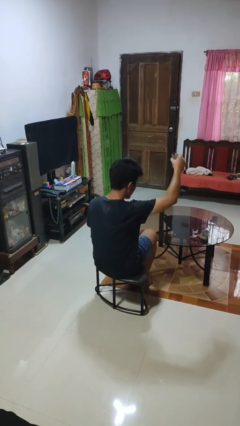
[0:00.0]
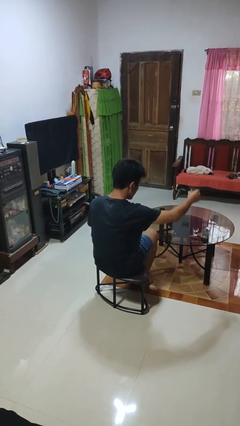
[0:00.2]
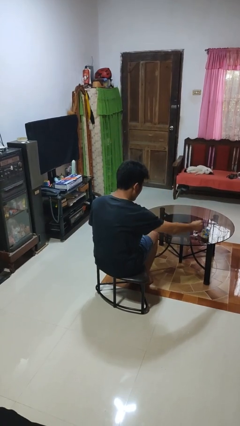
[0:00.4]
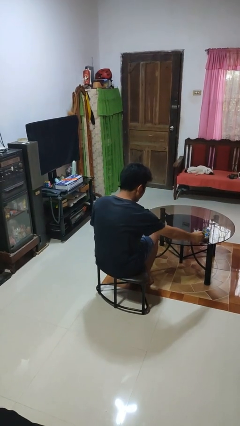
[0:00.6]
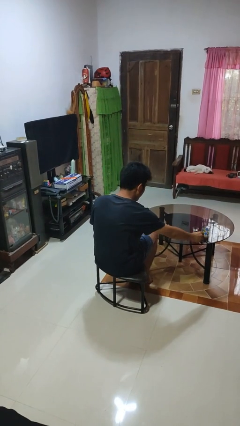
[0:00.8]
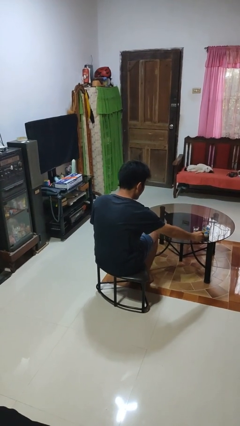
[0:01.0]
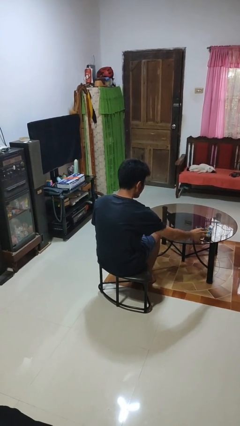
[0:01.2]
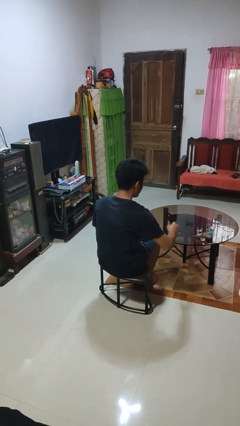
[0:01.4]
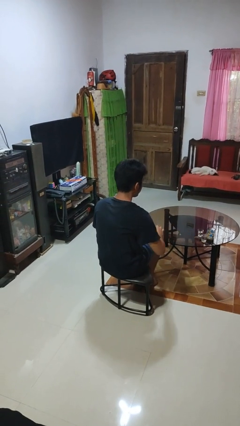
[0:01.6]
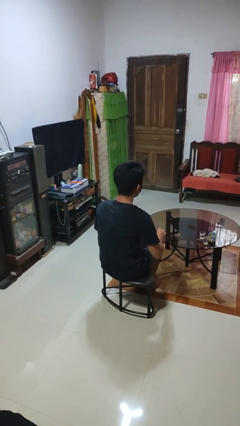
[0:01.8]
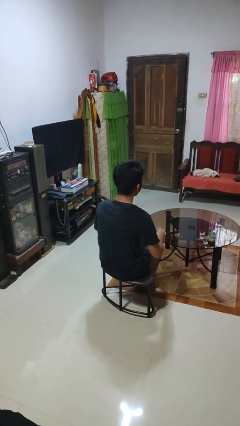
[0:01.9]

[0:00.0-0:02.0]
person puts down object on table

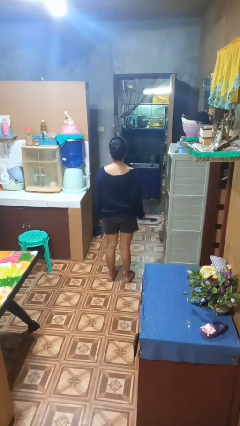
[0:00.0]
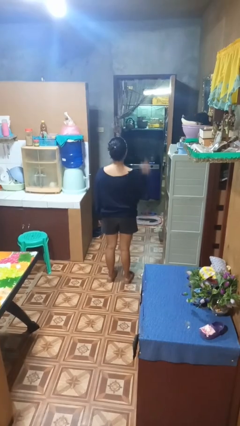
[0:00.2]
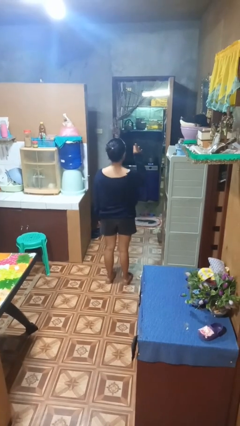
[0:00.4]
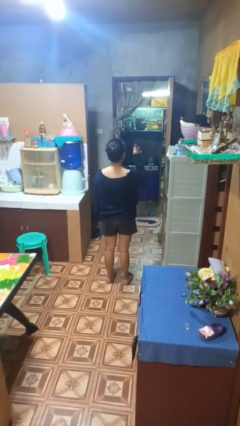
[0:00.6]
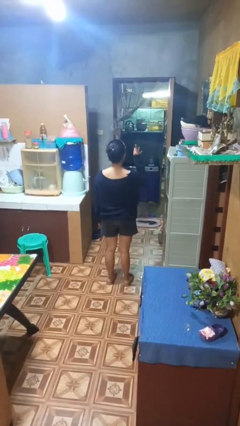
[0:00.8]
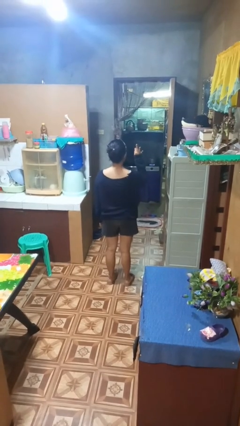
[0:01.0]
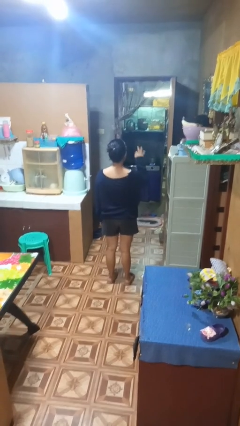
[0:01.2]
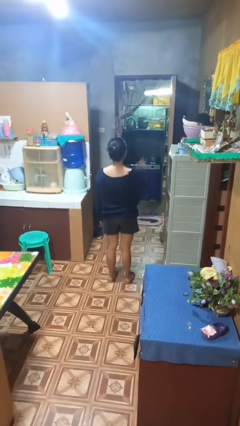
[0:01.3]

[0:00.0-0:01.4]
person gestures number three

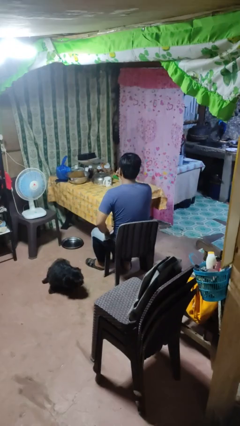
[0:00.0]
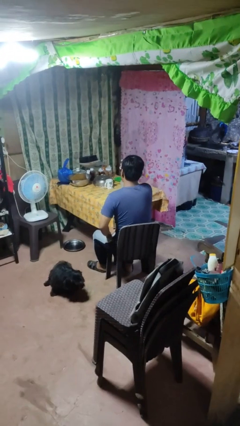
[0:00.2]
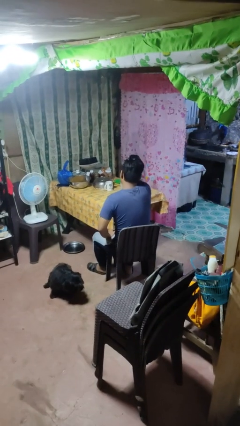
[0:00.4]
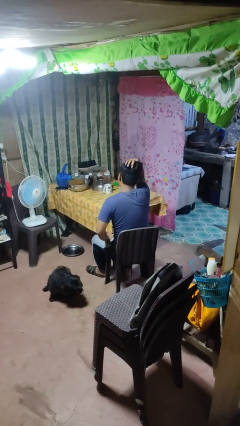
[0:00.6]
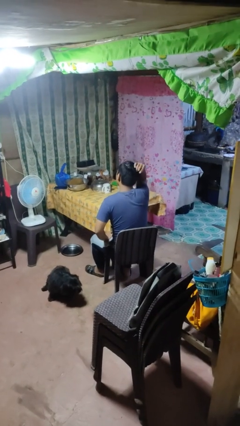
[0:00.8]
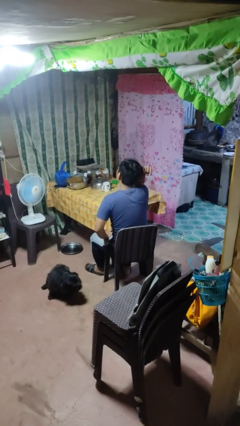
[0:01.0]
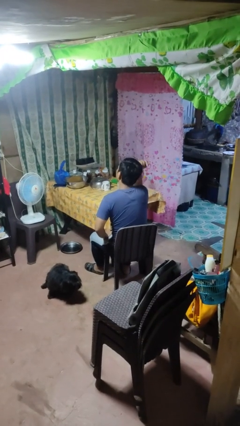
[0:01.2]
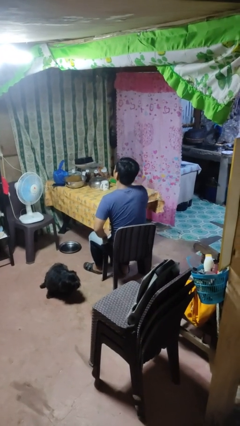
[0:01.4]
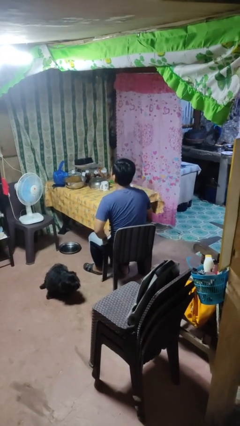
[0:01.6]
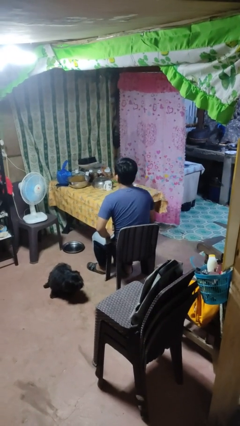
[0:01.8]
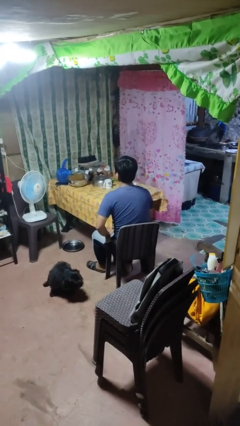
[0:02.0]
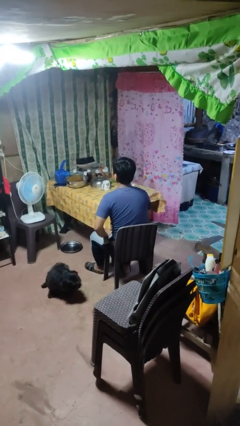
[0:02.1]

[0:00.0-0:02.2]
person strokes hair

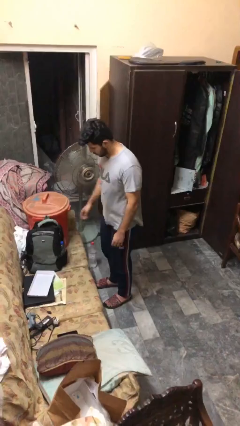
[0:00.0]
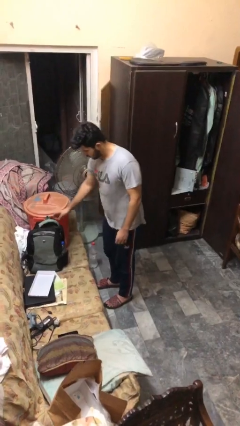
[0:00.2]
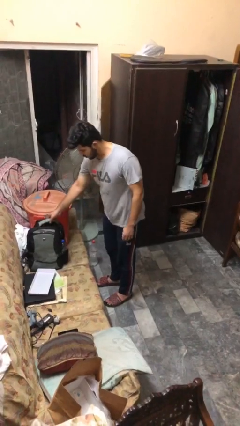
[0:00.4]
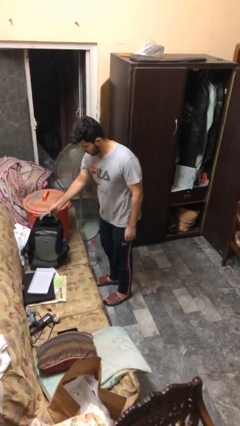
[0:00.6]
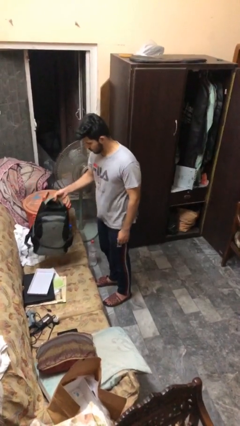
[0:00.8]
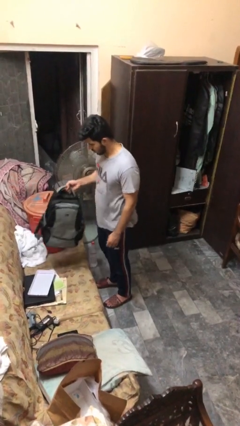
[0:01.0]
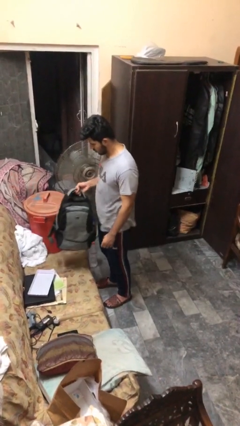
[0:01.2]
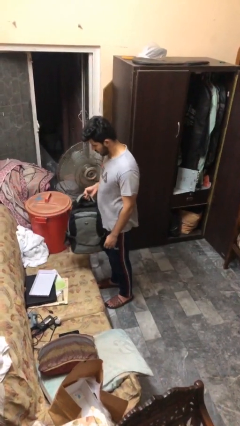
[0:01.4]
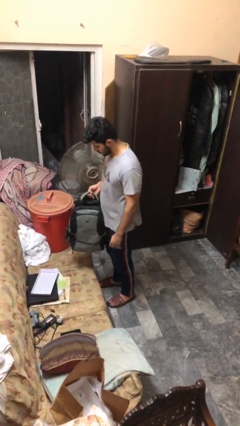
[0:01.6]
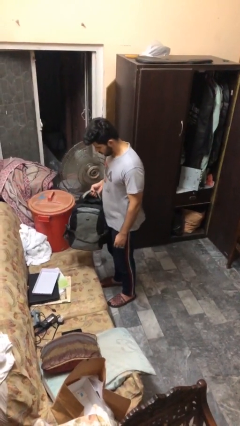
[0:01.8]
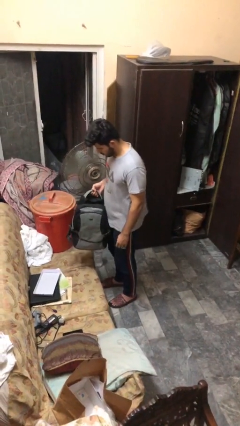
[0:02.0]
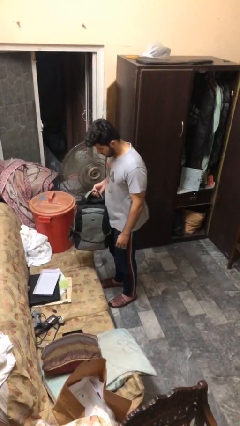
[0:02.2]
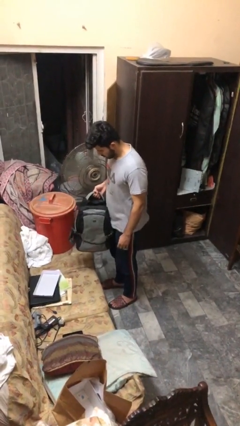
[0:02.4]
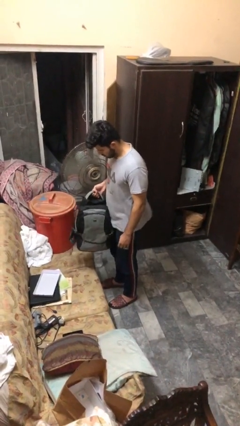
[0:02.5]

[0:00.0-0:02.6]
person picks up object from couch

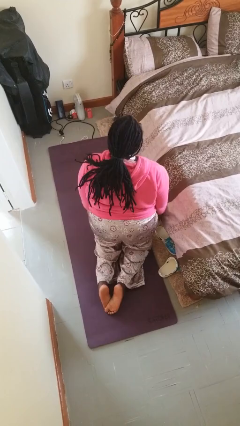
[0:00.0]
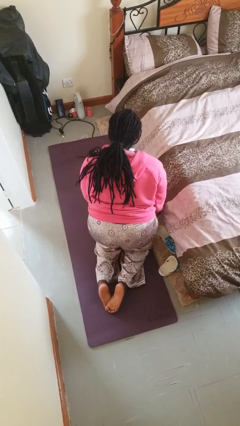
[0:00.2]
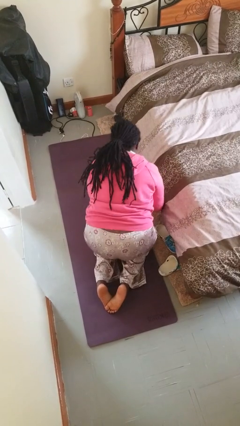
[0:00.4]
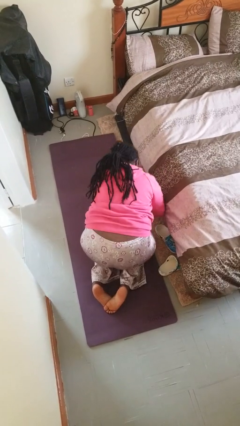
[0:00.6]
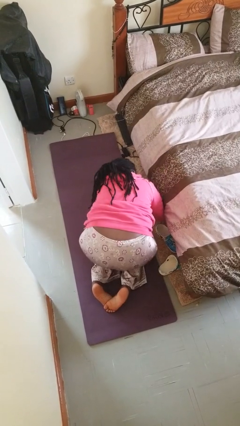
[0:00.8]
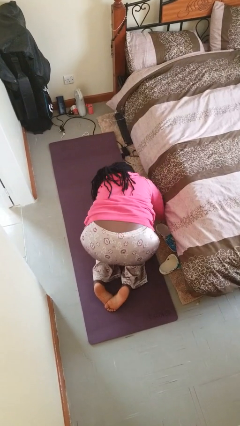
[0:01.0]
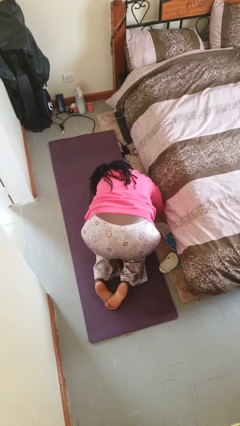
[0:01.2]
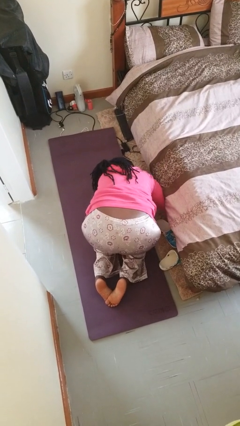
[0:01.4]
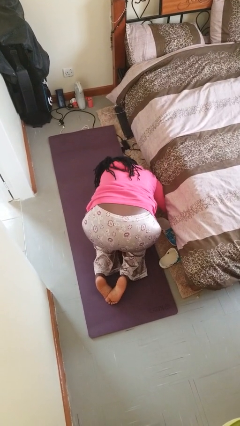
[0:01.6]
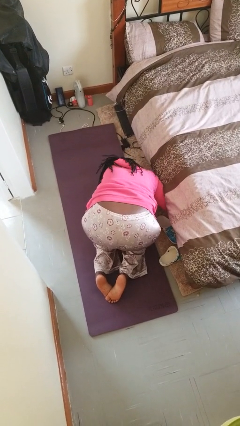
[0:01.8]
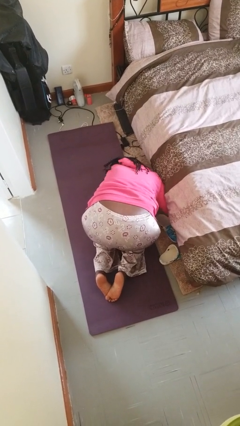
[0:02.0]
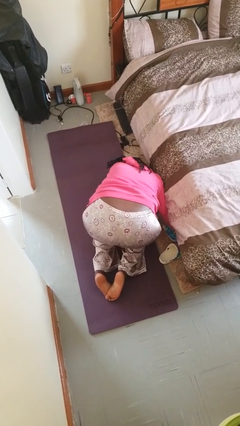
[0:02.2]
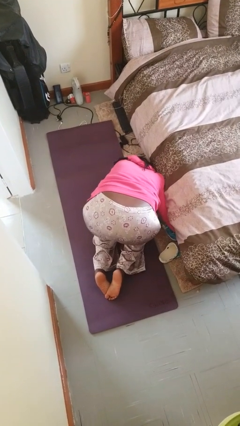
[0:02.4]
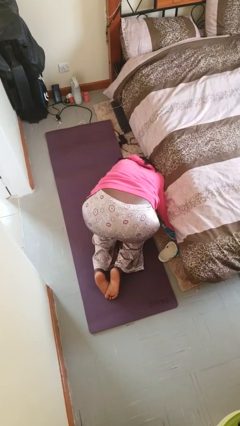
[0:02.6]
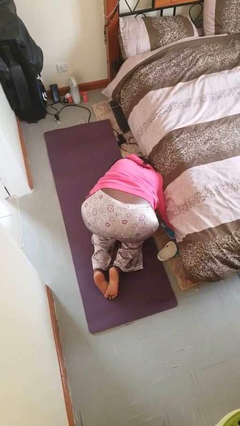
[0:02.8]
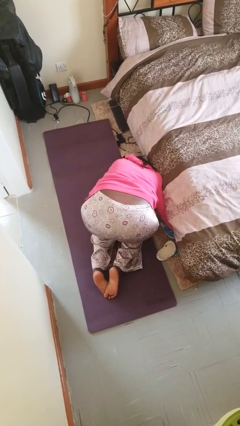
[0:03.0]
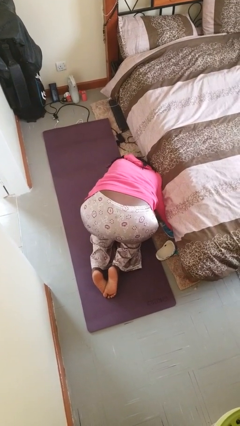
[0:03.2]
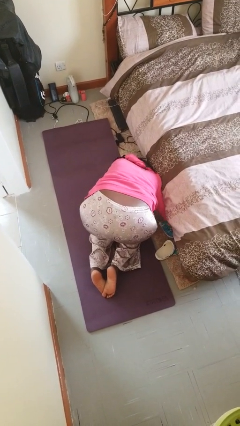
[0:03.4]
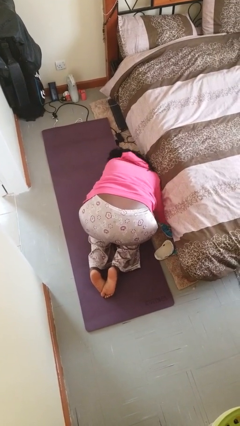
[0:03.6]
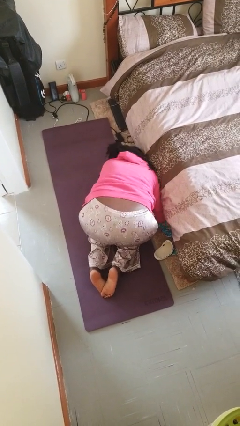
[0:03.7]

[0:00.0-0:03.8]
person searches under bed

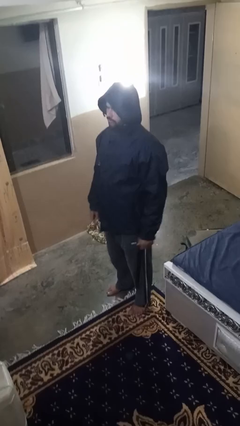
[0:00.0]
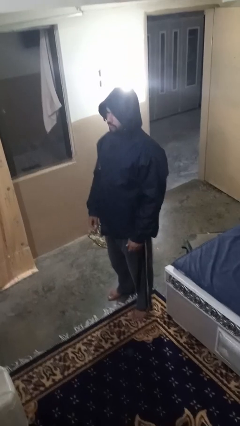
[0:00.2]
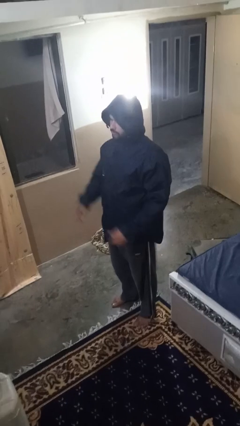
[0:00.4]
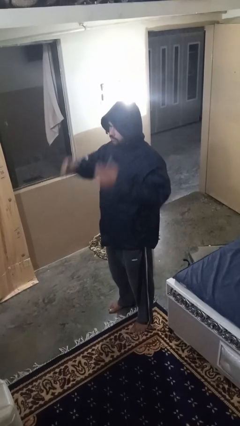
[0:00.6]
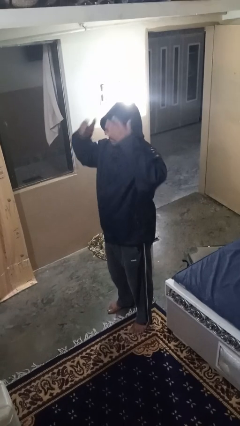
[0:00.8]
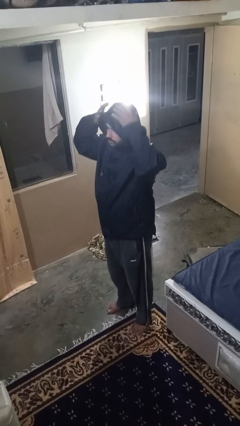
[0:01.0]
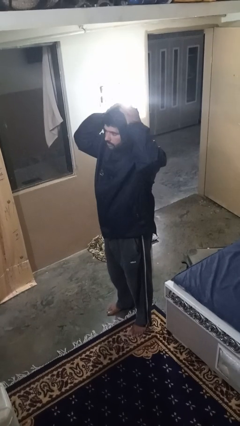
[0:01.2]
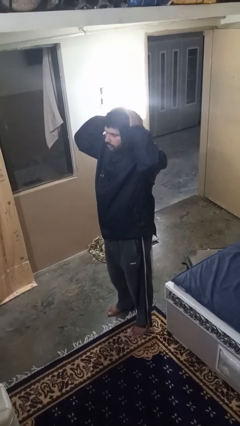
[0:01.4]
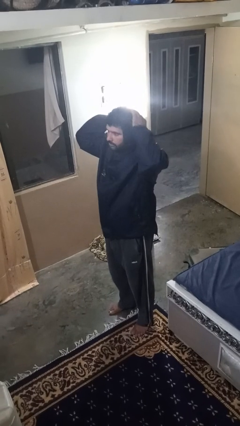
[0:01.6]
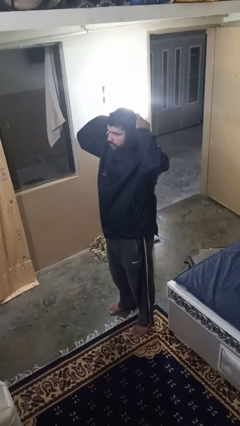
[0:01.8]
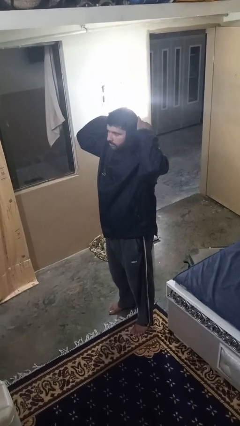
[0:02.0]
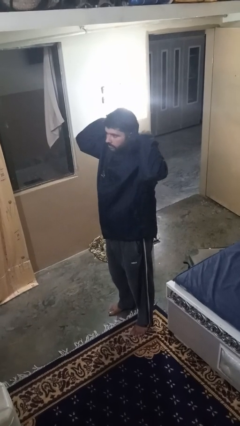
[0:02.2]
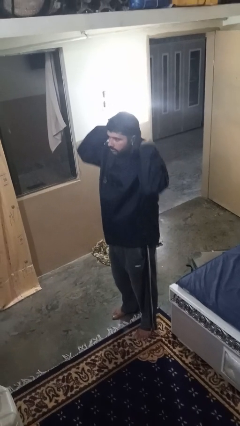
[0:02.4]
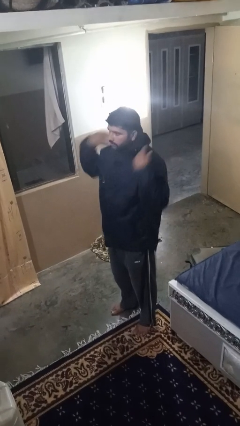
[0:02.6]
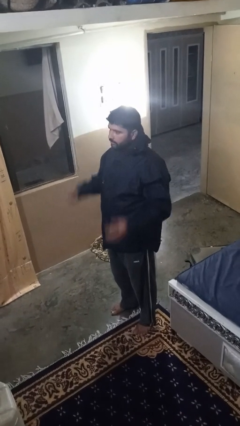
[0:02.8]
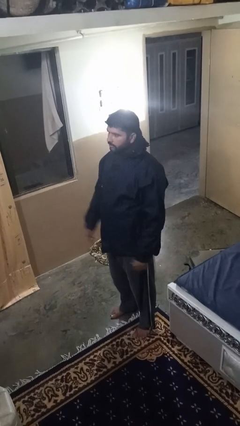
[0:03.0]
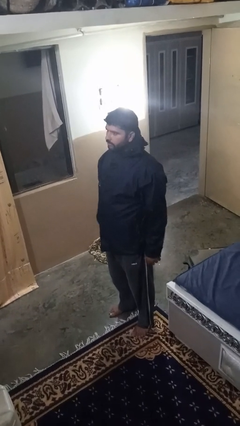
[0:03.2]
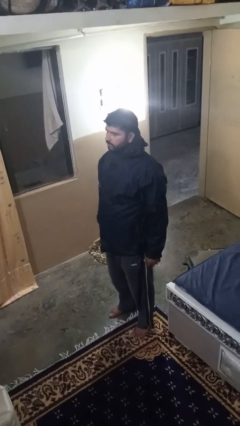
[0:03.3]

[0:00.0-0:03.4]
person takes off hoodie

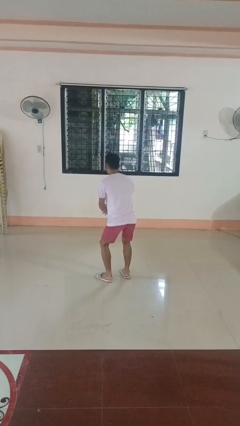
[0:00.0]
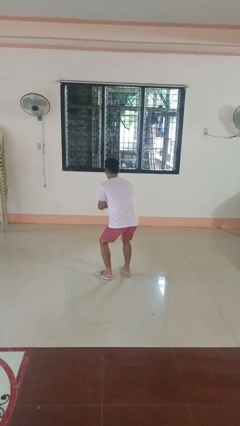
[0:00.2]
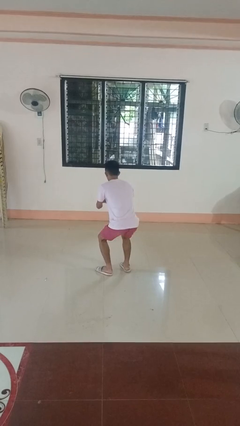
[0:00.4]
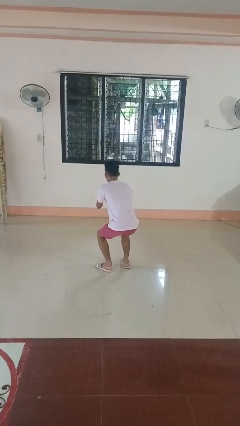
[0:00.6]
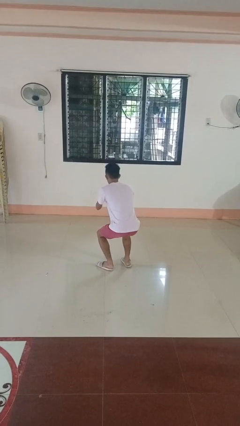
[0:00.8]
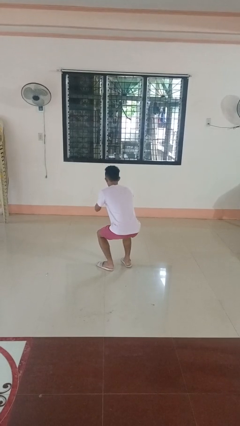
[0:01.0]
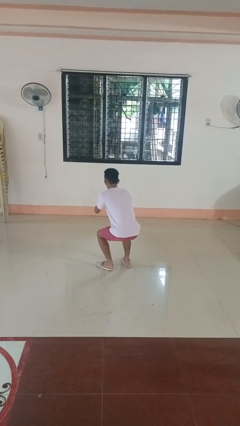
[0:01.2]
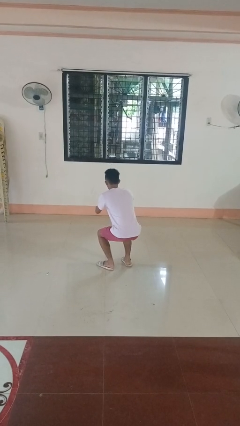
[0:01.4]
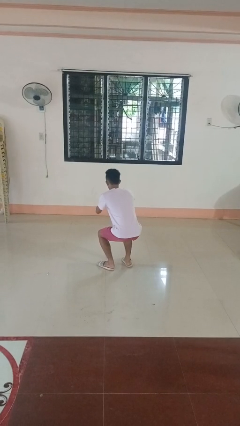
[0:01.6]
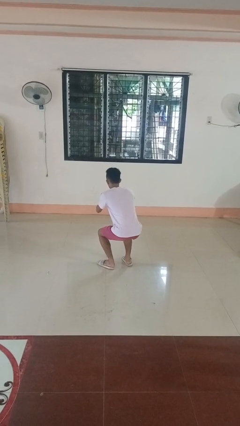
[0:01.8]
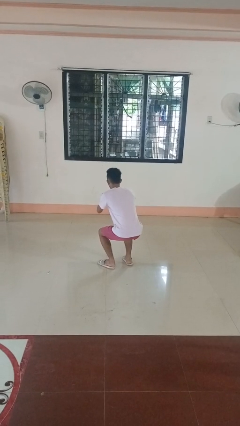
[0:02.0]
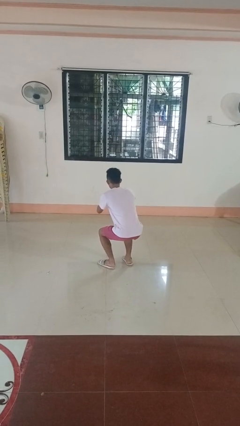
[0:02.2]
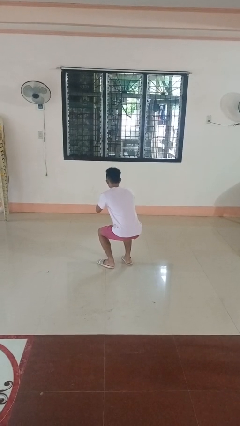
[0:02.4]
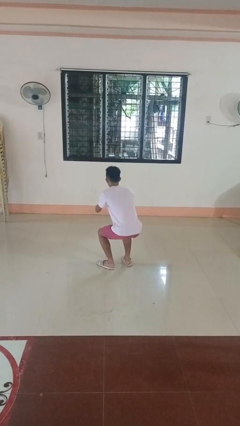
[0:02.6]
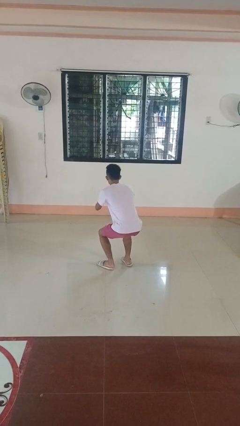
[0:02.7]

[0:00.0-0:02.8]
person squats
